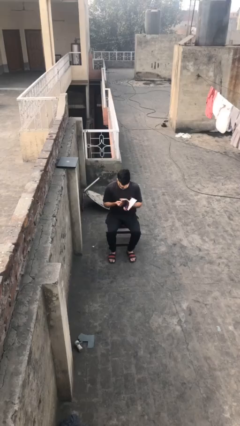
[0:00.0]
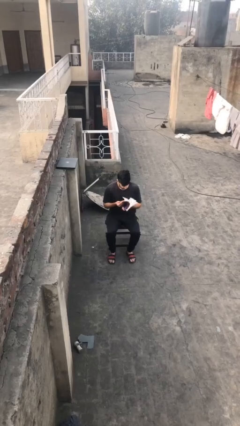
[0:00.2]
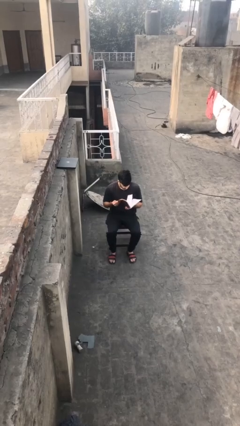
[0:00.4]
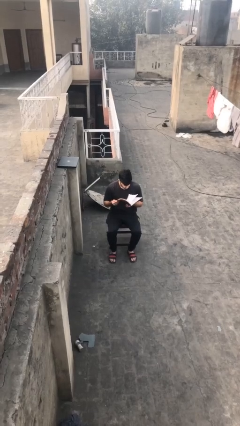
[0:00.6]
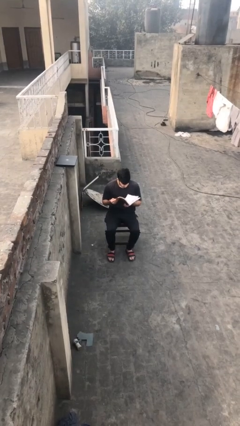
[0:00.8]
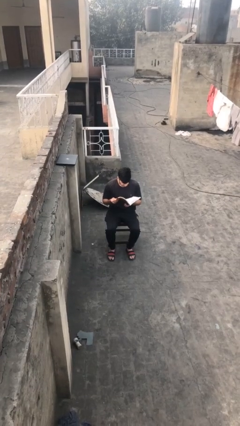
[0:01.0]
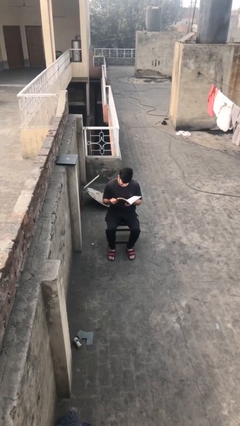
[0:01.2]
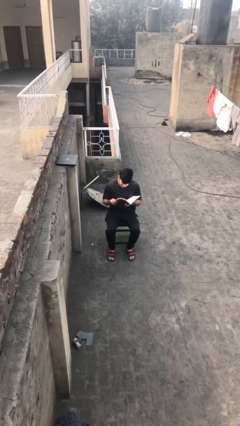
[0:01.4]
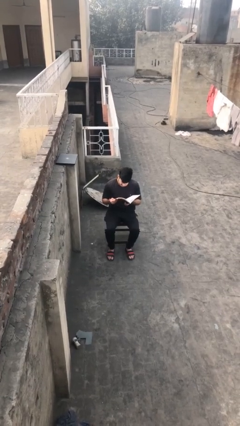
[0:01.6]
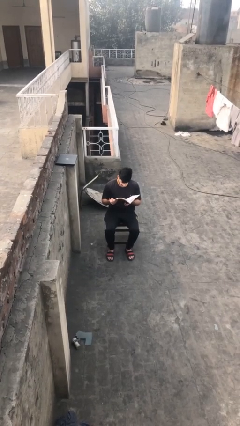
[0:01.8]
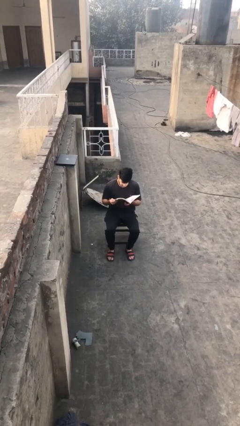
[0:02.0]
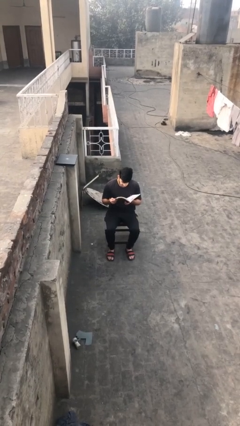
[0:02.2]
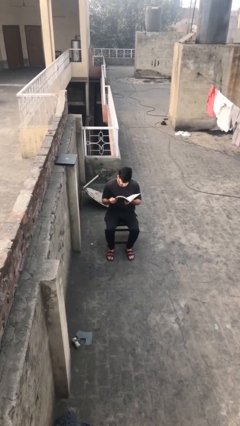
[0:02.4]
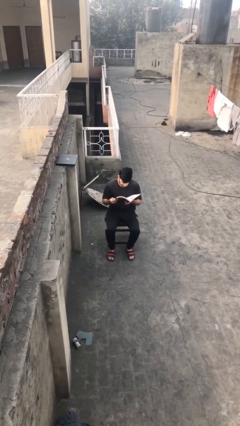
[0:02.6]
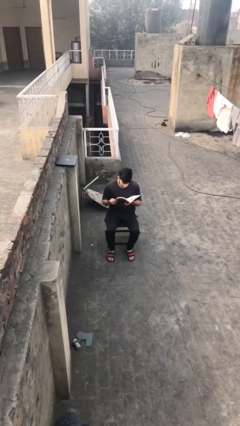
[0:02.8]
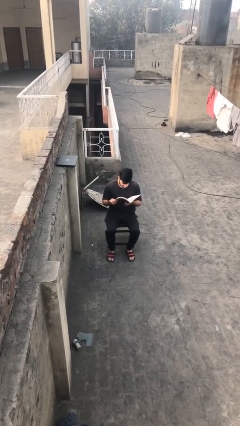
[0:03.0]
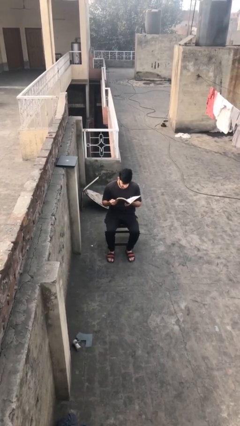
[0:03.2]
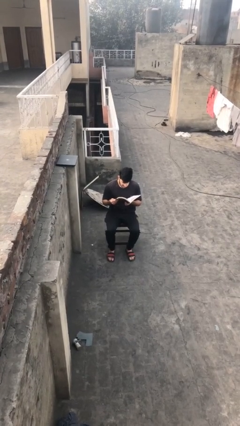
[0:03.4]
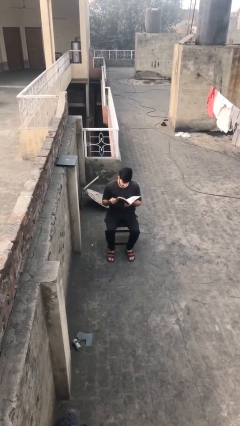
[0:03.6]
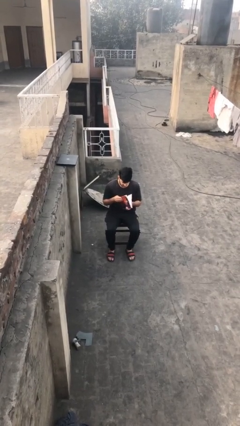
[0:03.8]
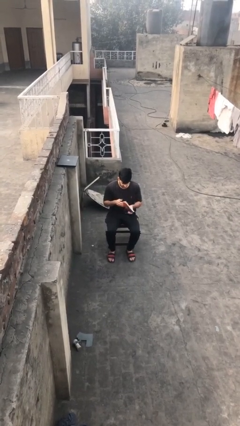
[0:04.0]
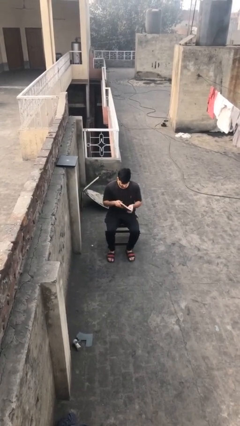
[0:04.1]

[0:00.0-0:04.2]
person reads document

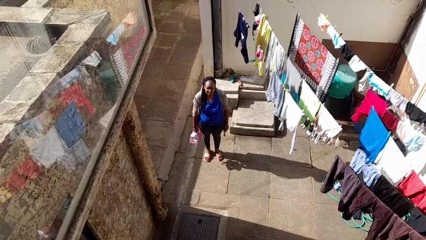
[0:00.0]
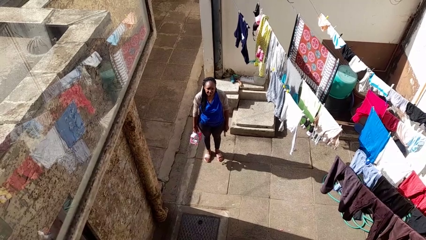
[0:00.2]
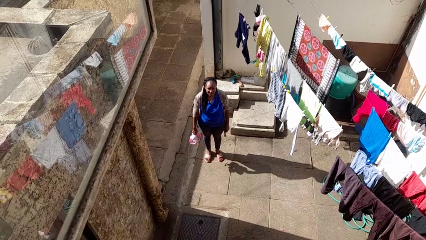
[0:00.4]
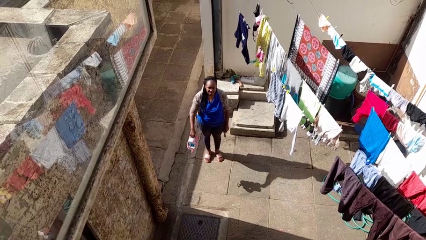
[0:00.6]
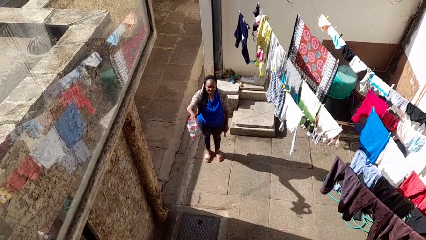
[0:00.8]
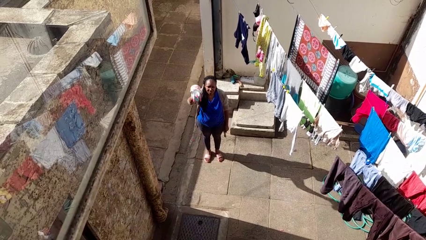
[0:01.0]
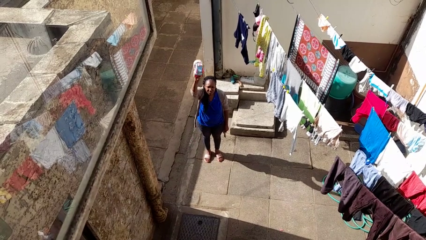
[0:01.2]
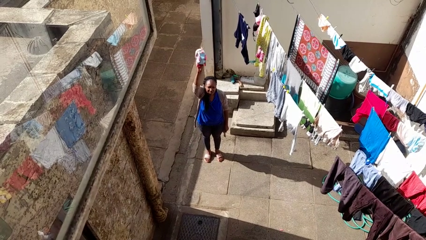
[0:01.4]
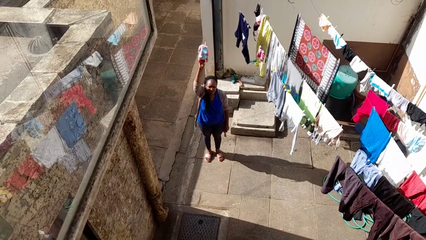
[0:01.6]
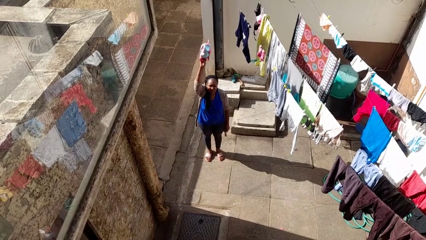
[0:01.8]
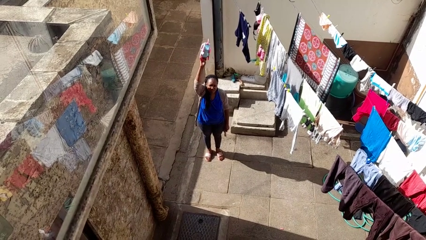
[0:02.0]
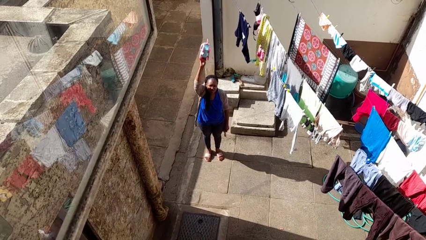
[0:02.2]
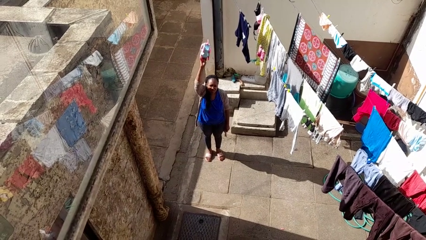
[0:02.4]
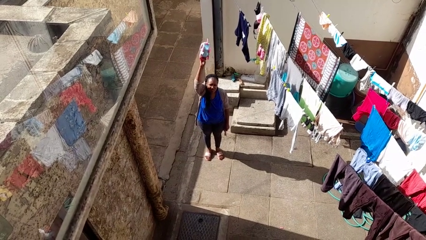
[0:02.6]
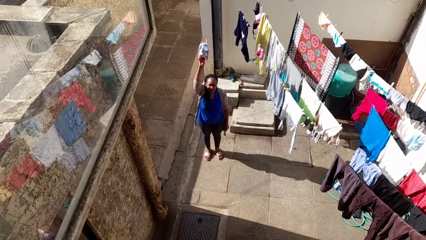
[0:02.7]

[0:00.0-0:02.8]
person holds object above head

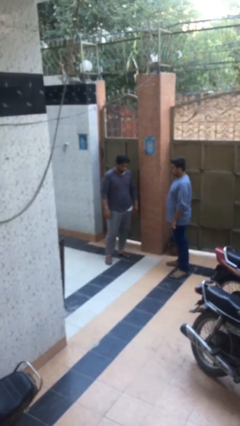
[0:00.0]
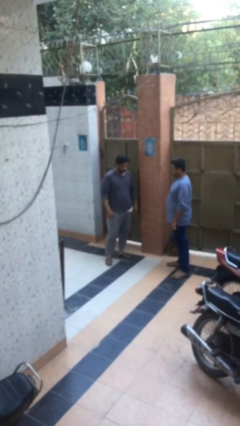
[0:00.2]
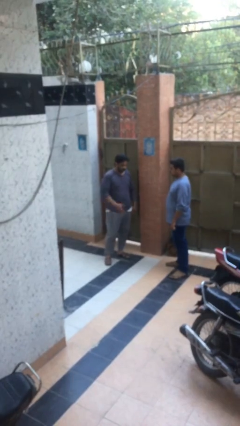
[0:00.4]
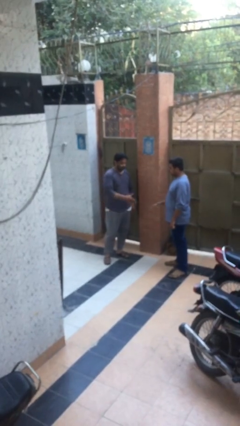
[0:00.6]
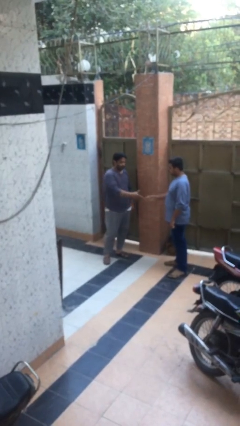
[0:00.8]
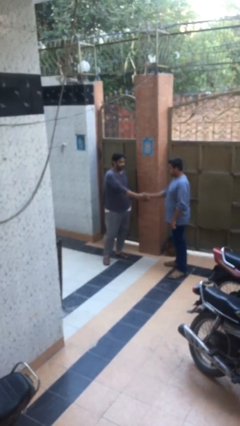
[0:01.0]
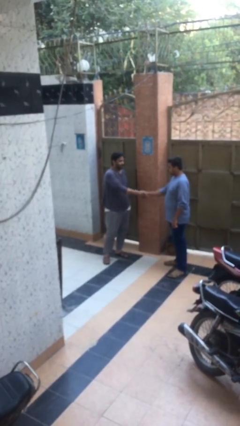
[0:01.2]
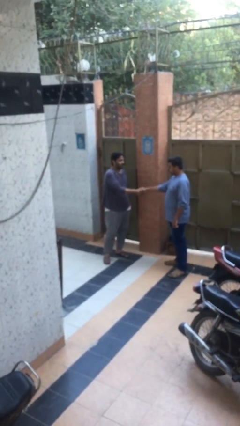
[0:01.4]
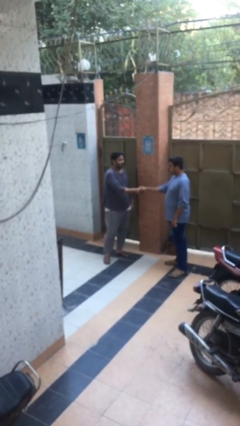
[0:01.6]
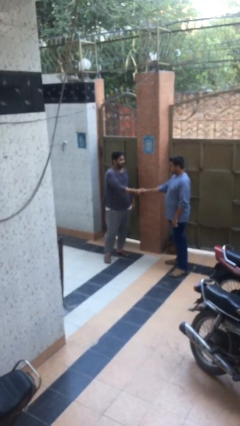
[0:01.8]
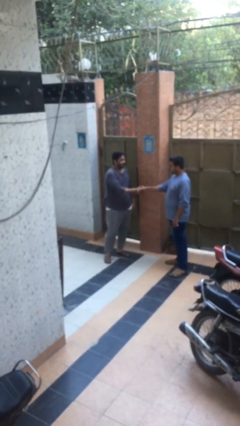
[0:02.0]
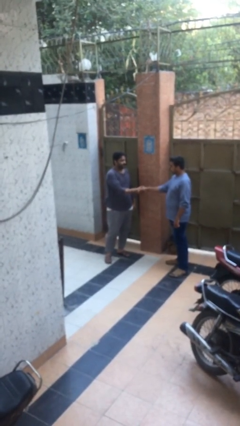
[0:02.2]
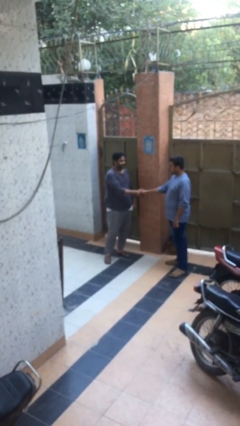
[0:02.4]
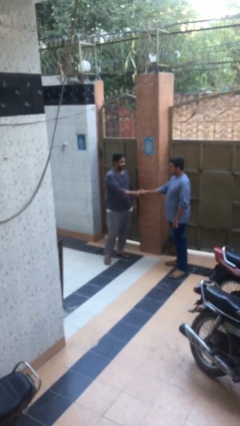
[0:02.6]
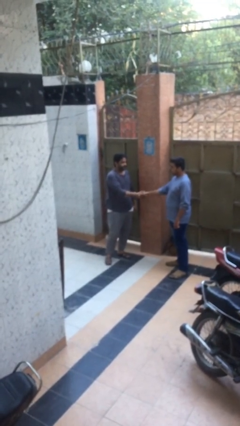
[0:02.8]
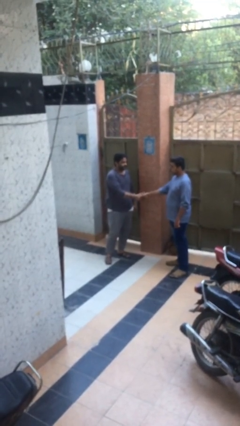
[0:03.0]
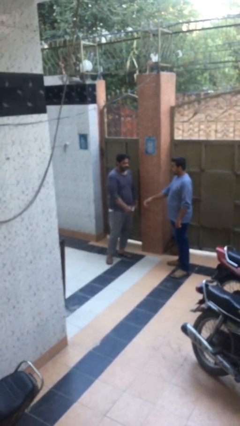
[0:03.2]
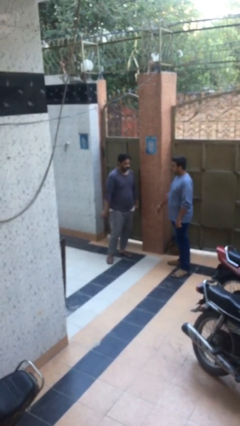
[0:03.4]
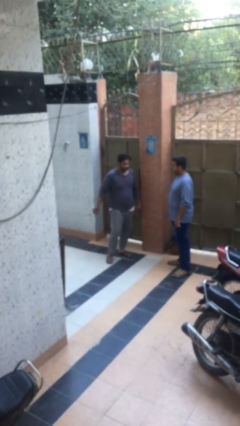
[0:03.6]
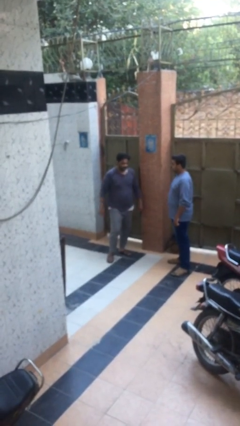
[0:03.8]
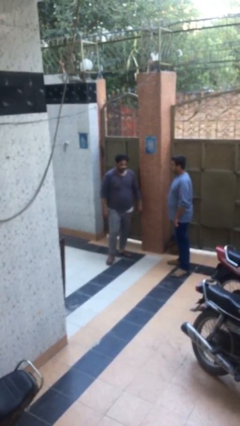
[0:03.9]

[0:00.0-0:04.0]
person shakes hand

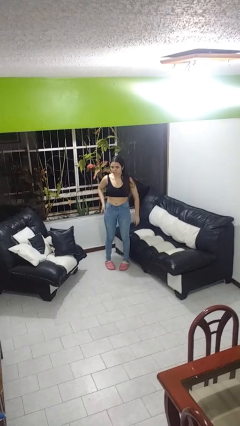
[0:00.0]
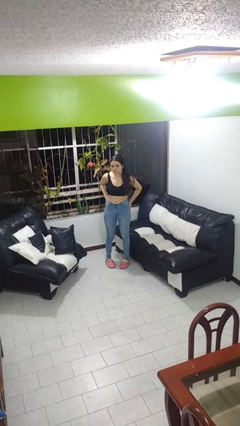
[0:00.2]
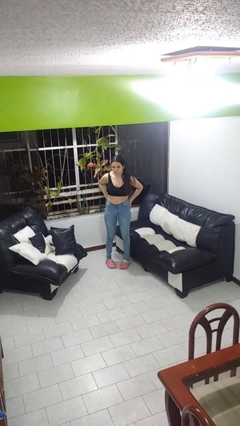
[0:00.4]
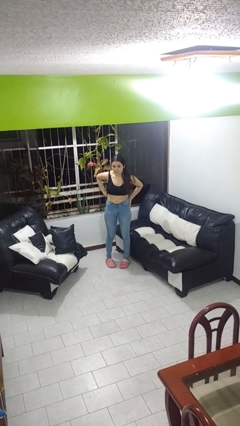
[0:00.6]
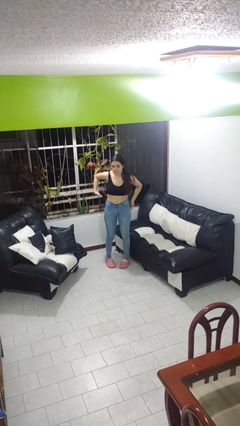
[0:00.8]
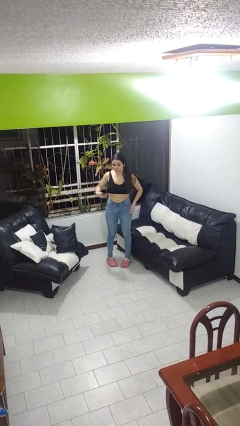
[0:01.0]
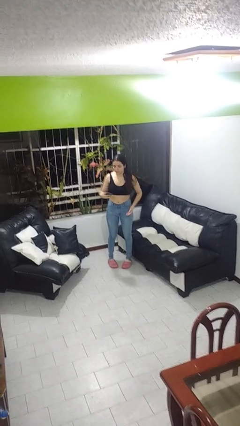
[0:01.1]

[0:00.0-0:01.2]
person takes phone from pocket

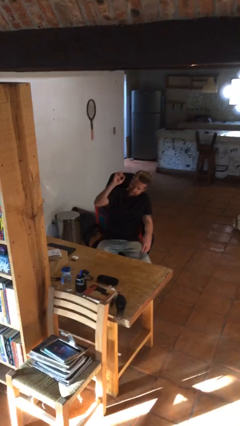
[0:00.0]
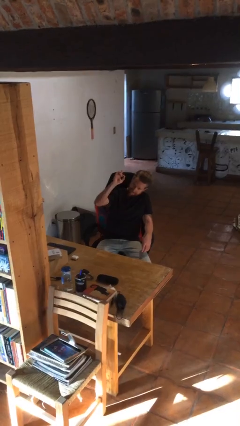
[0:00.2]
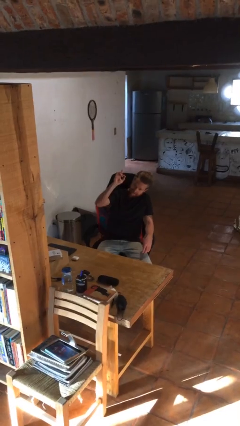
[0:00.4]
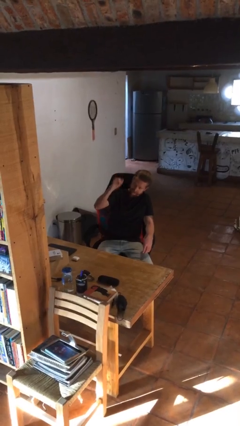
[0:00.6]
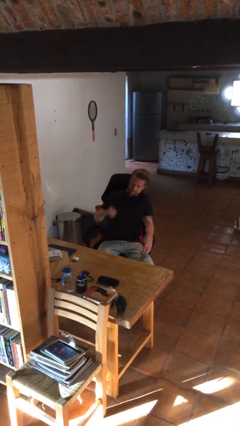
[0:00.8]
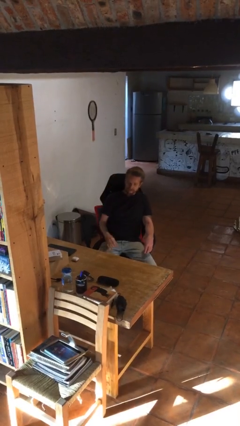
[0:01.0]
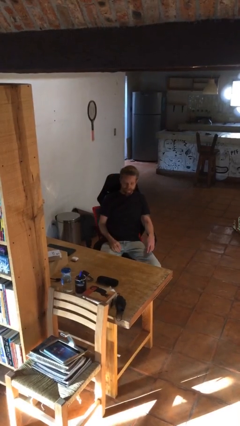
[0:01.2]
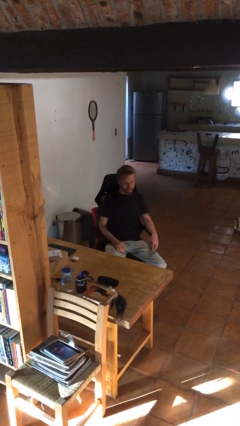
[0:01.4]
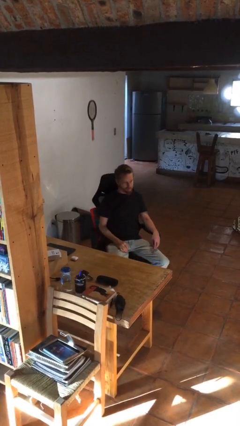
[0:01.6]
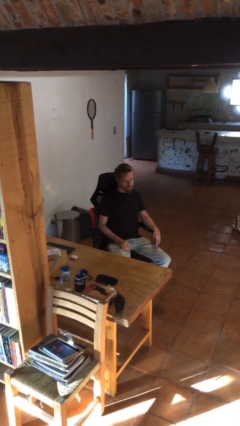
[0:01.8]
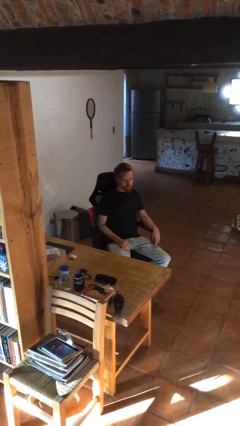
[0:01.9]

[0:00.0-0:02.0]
person gestures lower hand

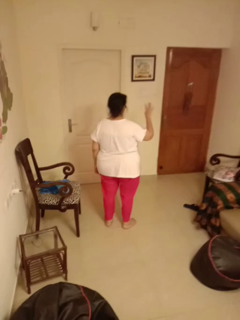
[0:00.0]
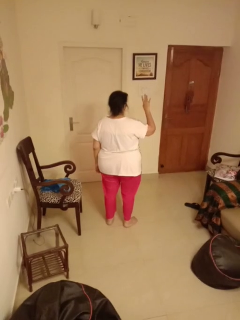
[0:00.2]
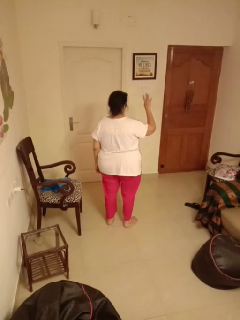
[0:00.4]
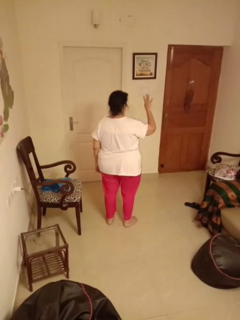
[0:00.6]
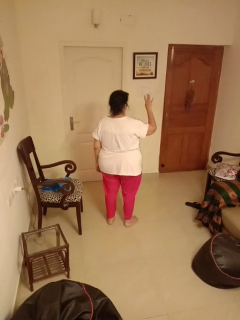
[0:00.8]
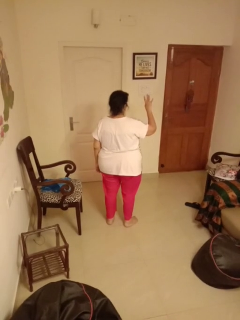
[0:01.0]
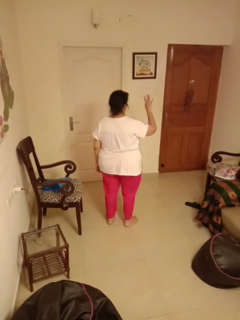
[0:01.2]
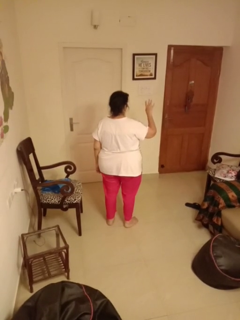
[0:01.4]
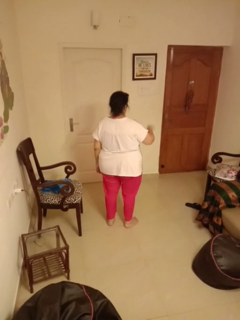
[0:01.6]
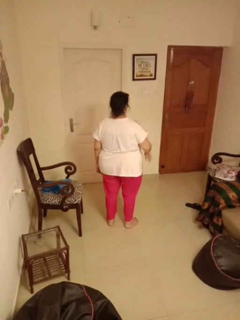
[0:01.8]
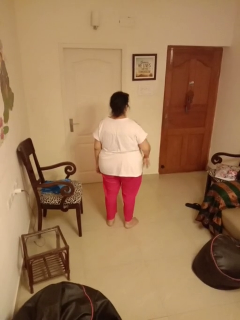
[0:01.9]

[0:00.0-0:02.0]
person gestures number four

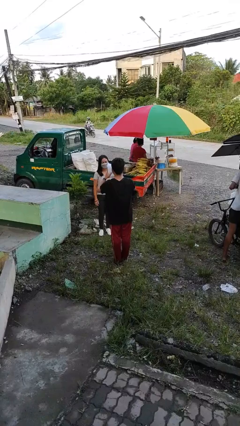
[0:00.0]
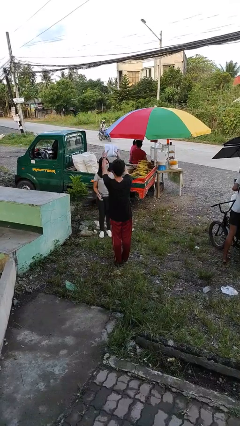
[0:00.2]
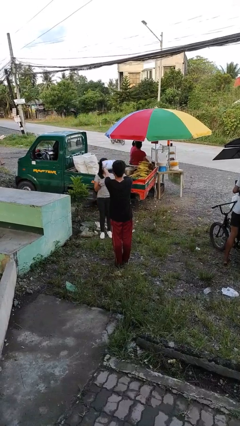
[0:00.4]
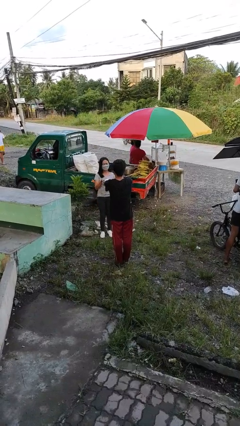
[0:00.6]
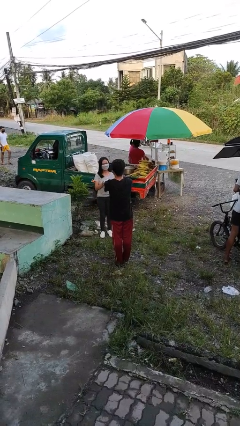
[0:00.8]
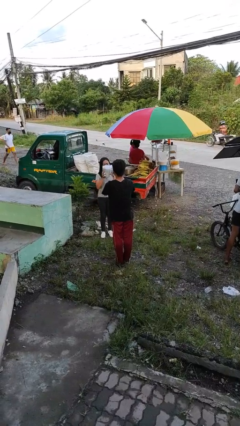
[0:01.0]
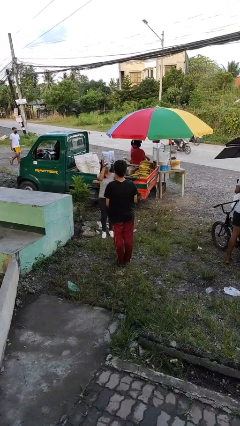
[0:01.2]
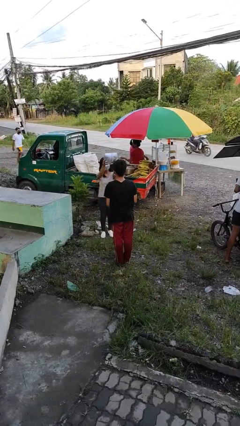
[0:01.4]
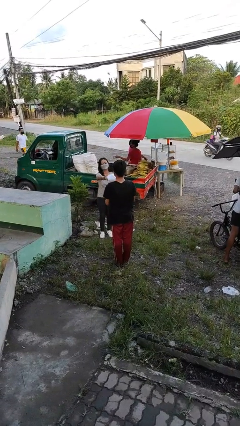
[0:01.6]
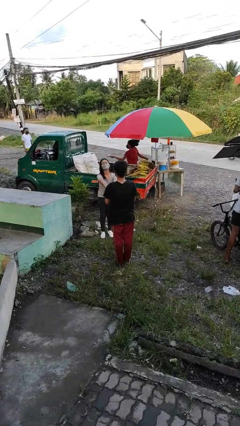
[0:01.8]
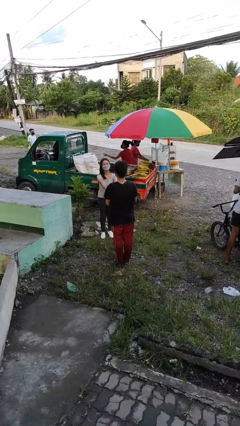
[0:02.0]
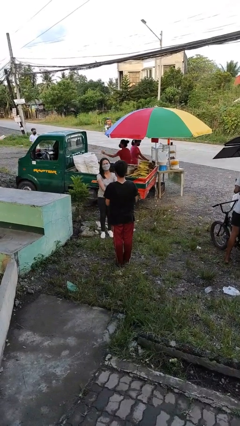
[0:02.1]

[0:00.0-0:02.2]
person transfers object to person
